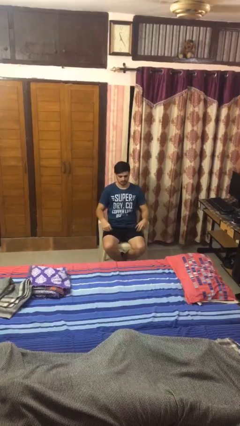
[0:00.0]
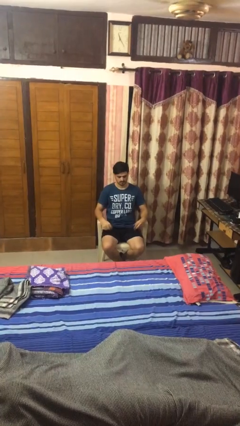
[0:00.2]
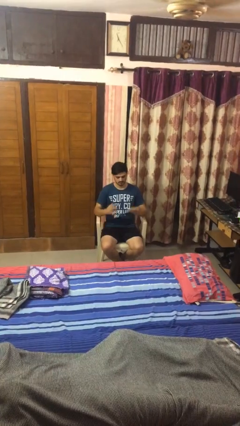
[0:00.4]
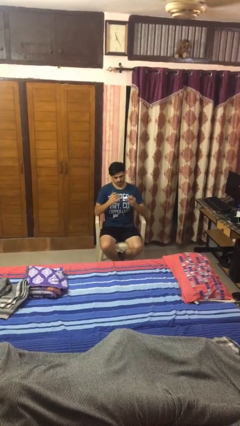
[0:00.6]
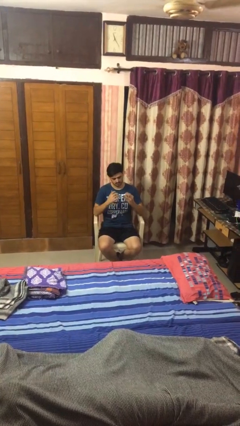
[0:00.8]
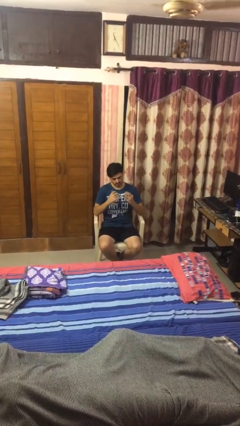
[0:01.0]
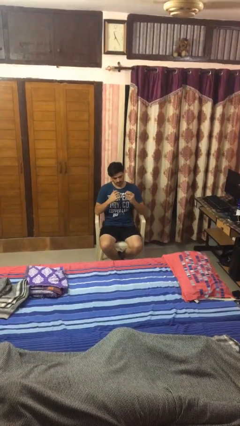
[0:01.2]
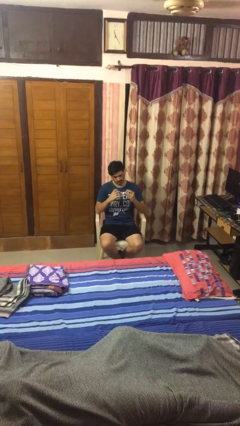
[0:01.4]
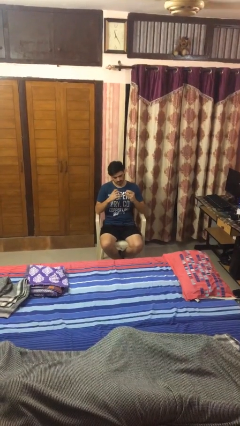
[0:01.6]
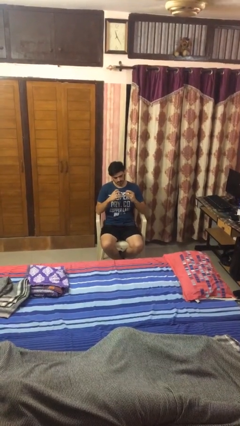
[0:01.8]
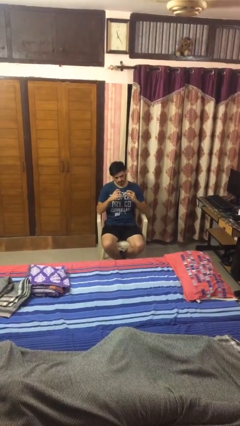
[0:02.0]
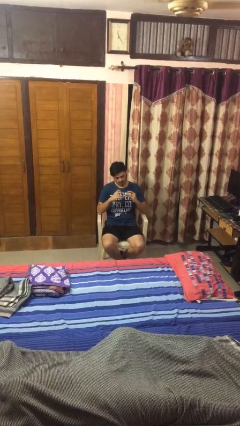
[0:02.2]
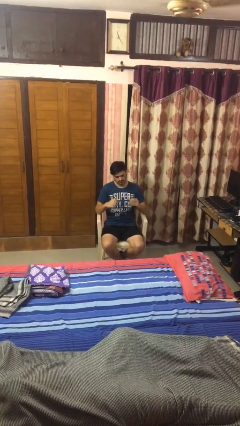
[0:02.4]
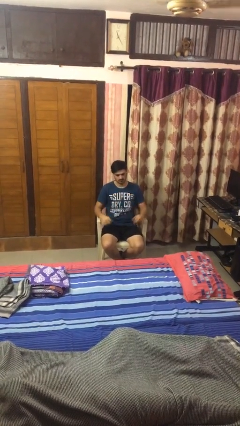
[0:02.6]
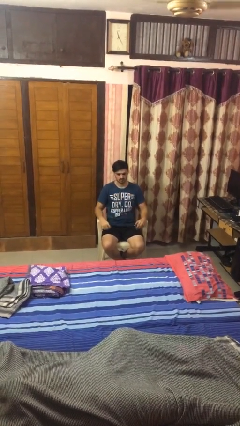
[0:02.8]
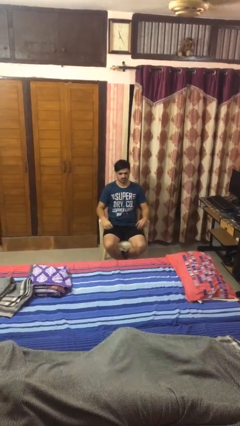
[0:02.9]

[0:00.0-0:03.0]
person clips fingernails

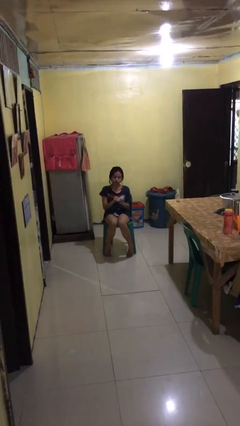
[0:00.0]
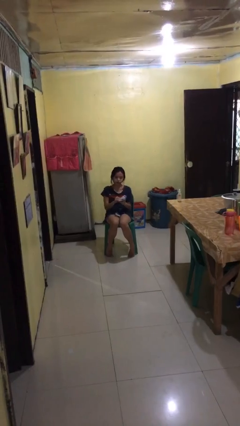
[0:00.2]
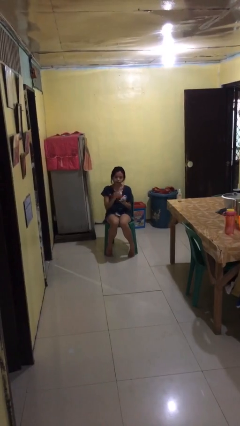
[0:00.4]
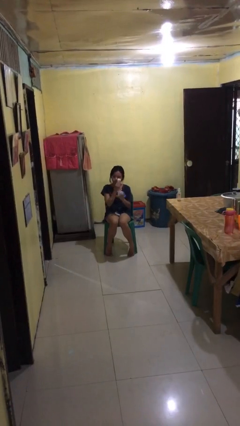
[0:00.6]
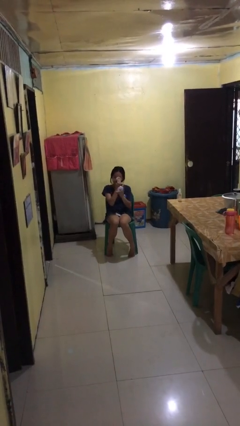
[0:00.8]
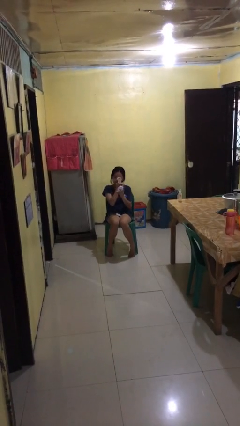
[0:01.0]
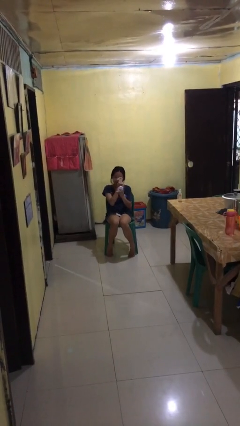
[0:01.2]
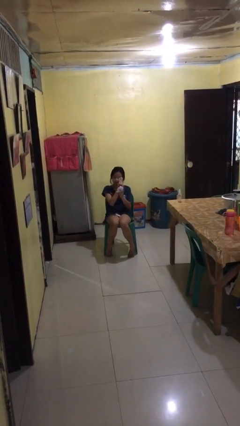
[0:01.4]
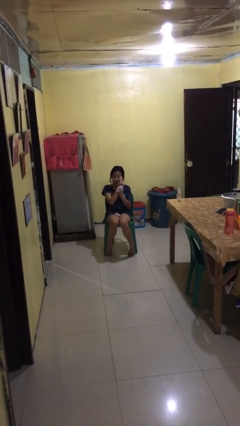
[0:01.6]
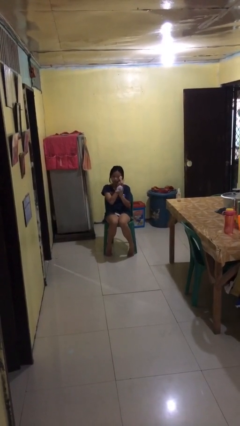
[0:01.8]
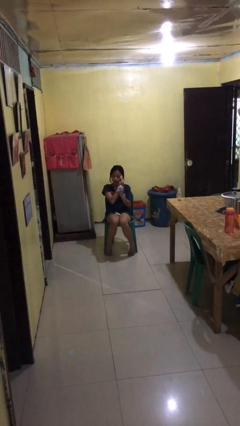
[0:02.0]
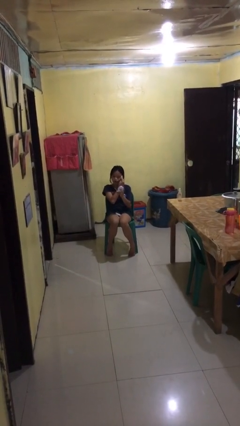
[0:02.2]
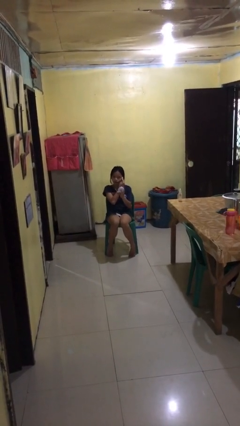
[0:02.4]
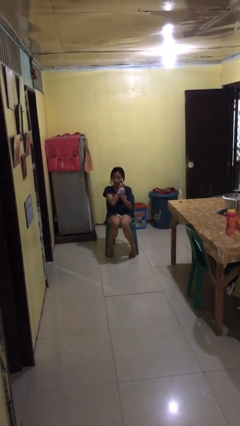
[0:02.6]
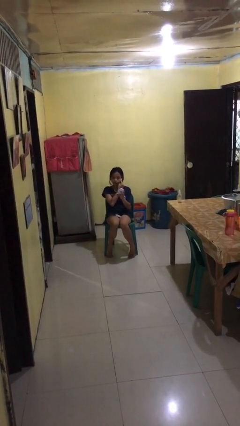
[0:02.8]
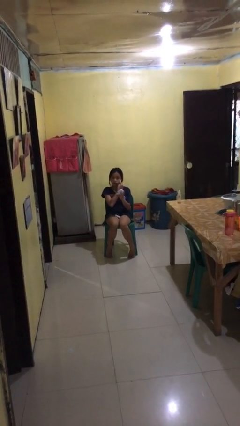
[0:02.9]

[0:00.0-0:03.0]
person applies foundation makeup

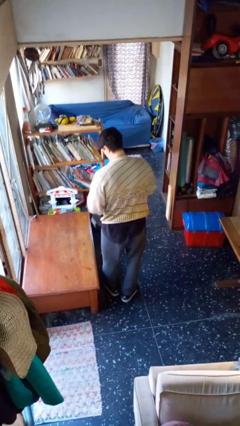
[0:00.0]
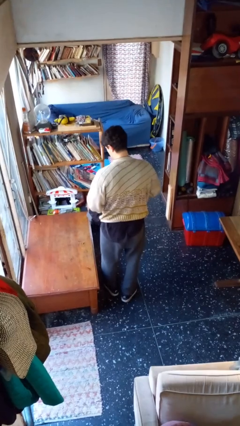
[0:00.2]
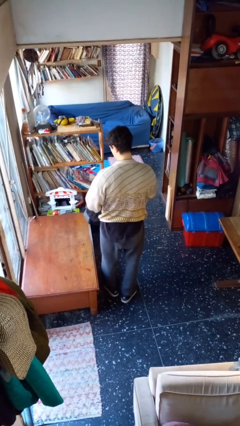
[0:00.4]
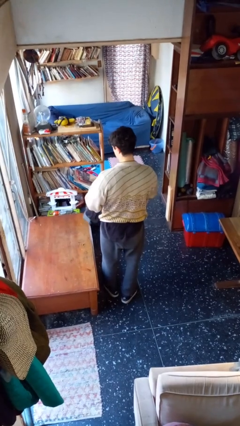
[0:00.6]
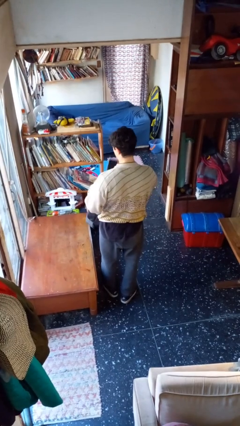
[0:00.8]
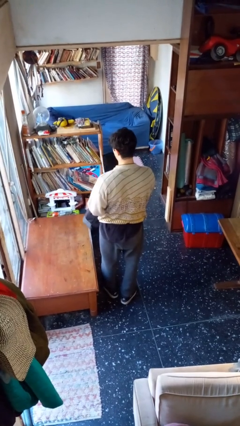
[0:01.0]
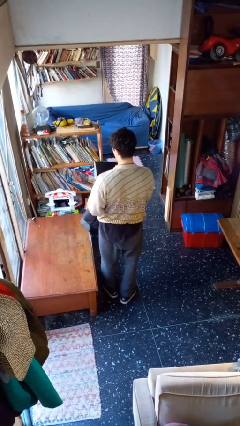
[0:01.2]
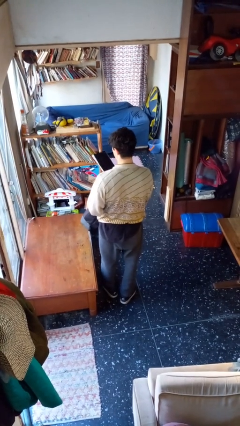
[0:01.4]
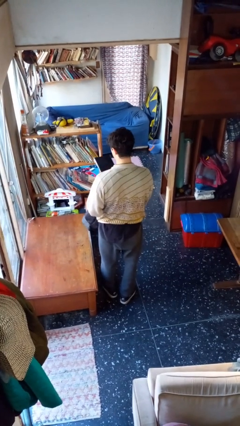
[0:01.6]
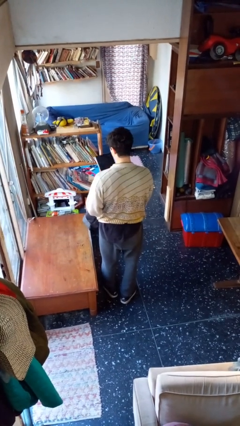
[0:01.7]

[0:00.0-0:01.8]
person takes object from backpack

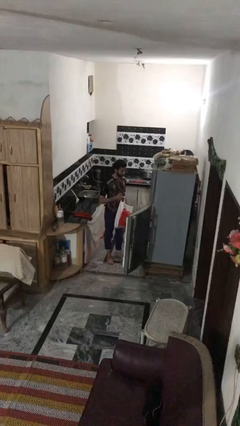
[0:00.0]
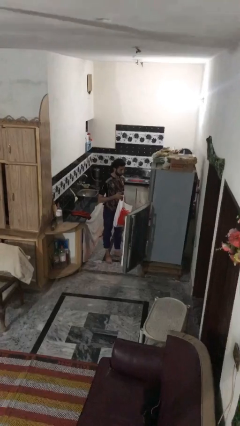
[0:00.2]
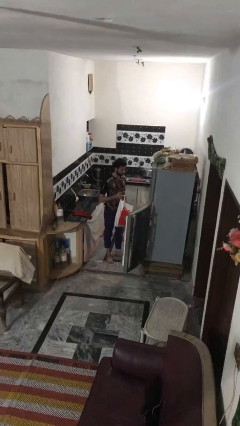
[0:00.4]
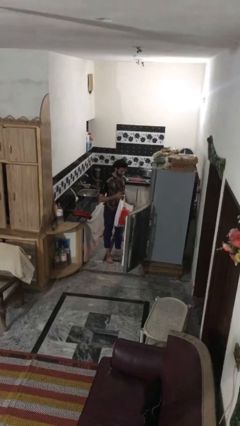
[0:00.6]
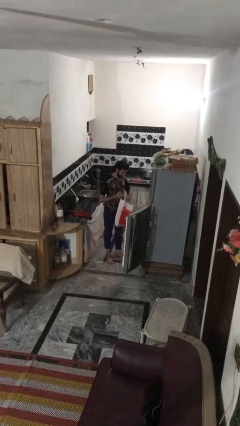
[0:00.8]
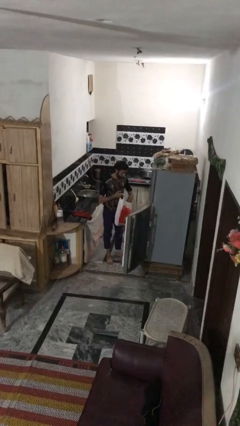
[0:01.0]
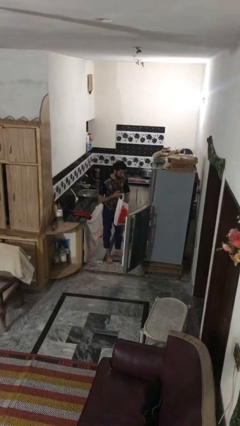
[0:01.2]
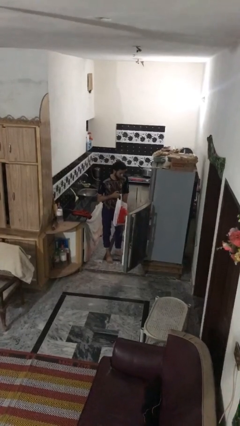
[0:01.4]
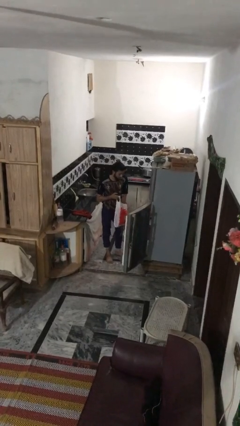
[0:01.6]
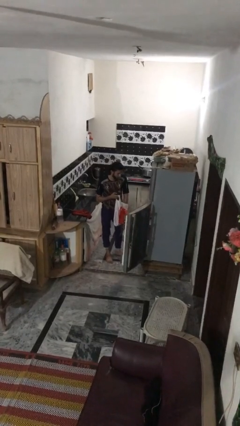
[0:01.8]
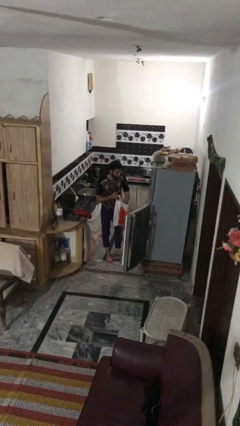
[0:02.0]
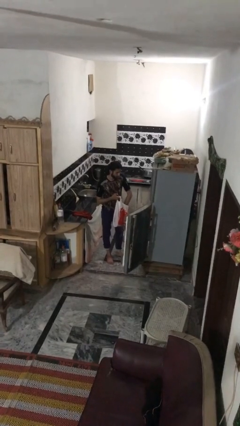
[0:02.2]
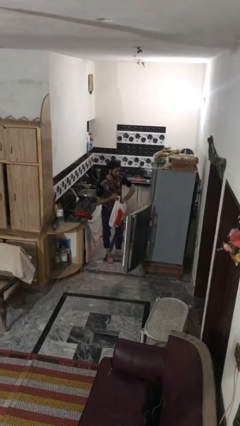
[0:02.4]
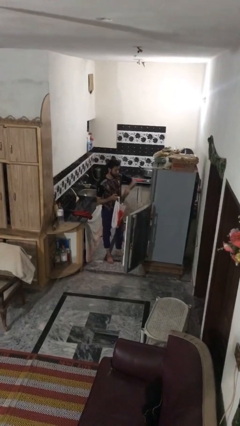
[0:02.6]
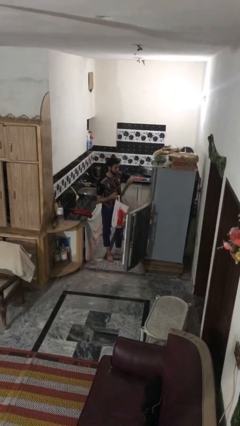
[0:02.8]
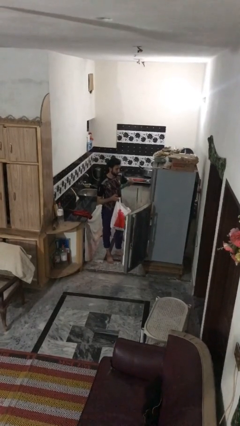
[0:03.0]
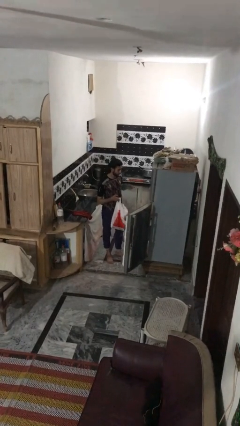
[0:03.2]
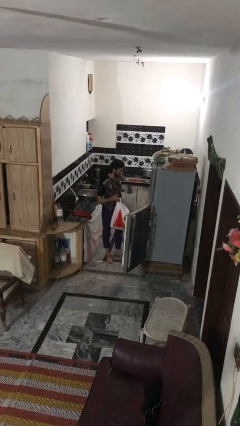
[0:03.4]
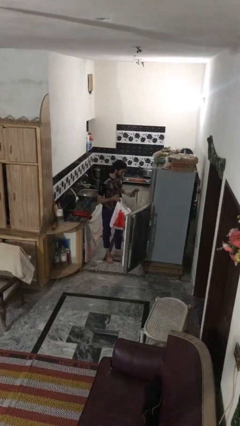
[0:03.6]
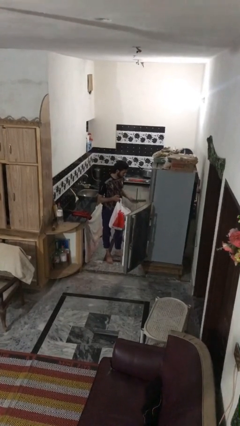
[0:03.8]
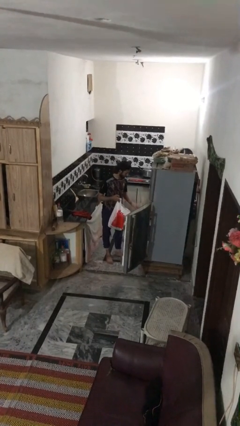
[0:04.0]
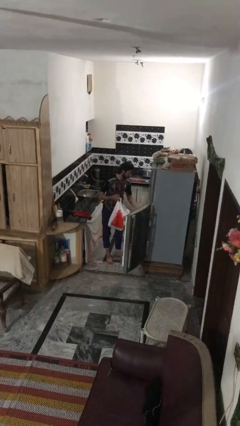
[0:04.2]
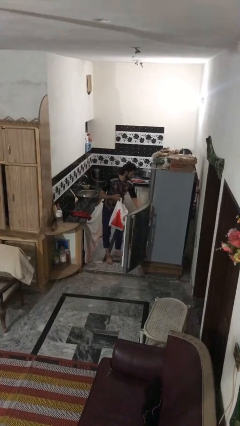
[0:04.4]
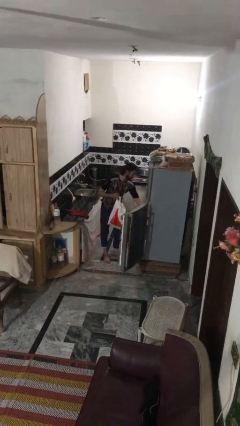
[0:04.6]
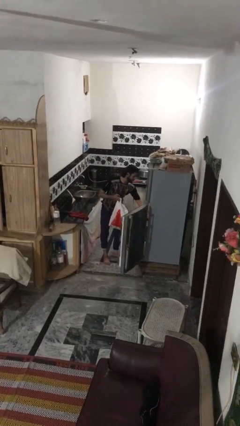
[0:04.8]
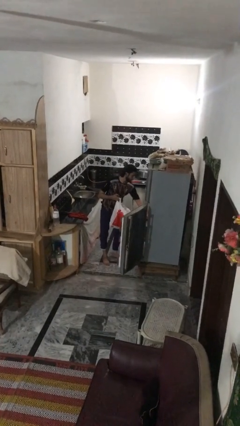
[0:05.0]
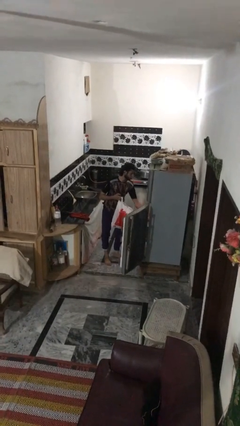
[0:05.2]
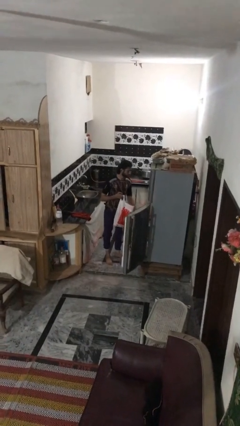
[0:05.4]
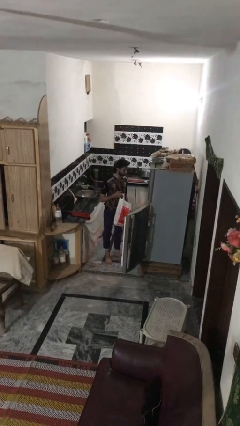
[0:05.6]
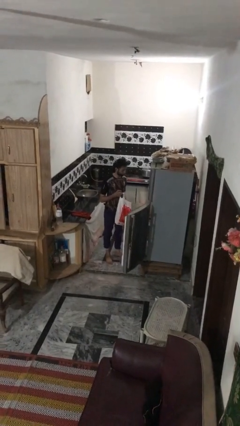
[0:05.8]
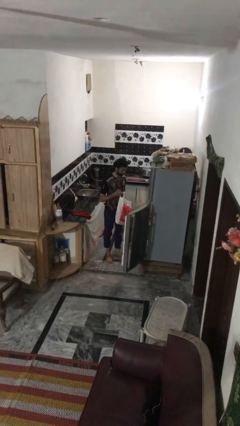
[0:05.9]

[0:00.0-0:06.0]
person loads groceries into refrigerator

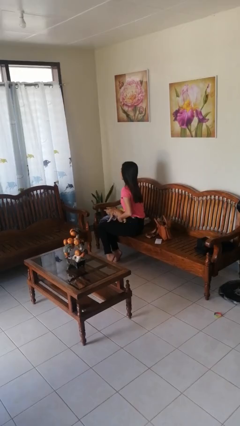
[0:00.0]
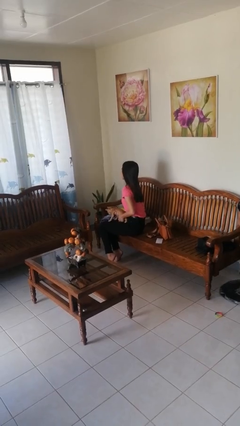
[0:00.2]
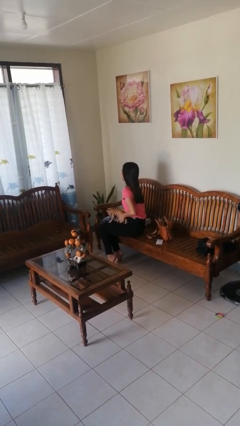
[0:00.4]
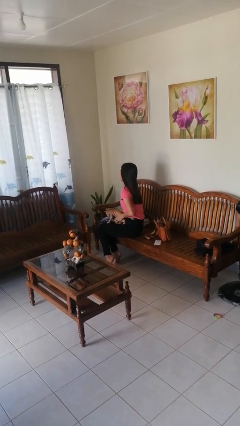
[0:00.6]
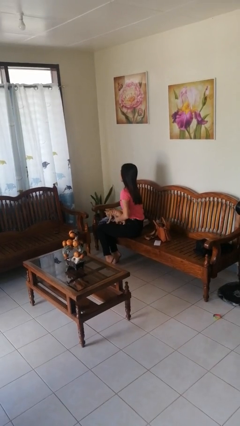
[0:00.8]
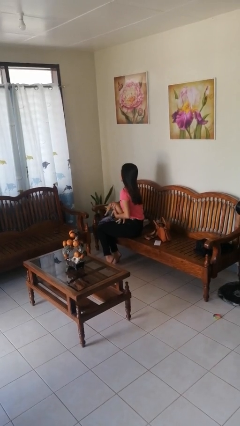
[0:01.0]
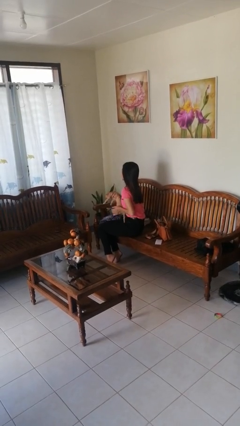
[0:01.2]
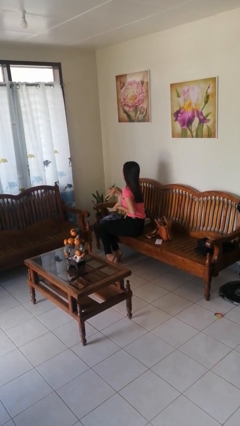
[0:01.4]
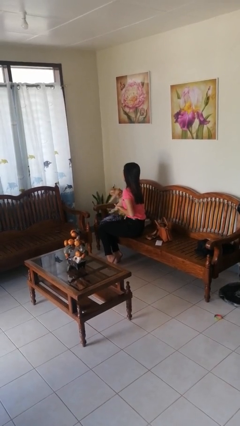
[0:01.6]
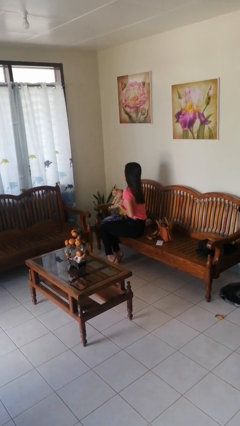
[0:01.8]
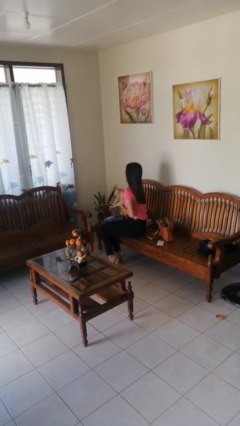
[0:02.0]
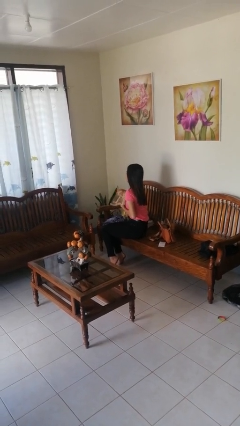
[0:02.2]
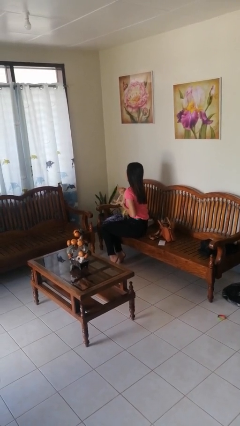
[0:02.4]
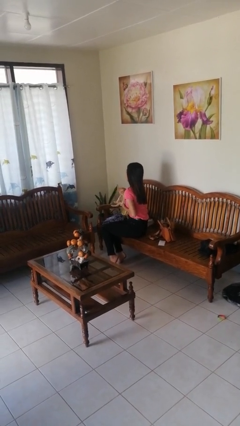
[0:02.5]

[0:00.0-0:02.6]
person hugs cat

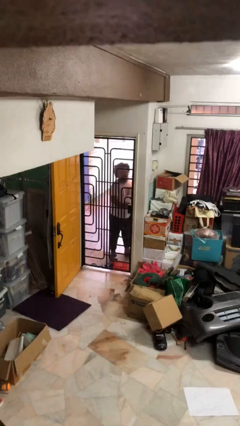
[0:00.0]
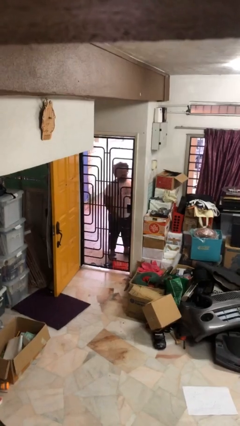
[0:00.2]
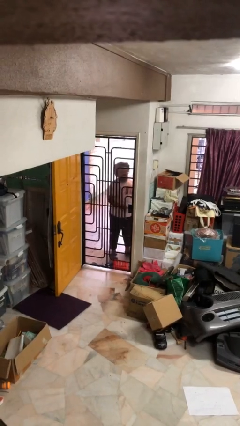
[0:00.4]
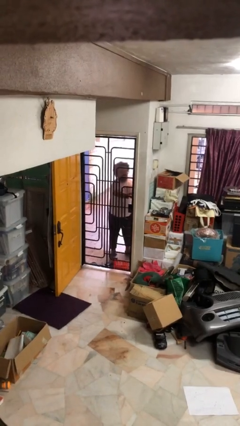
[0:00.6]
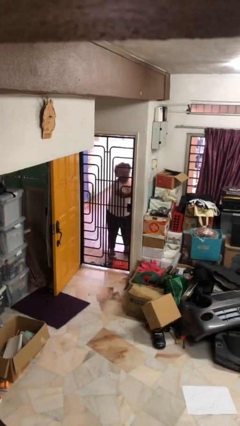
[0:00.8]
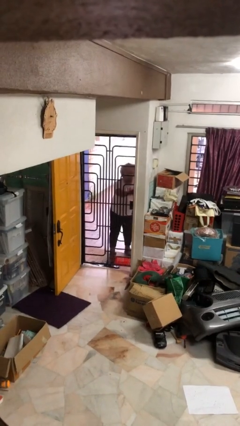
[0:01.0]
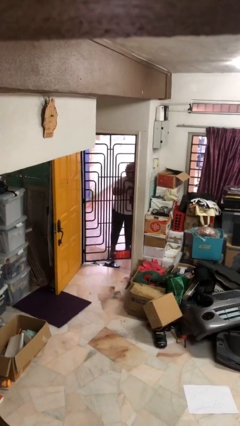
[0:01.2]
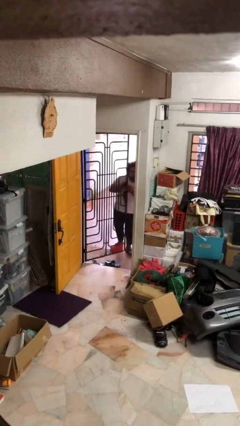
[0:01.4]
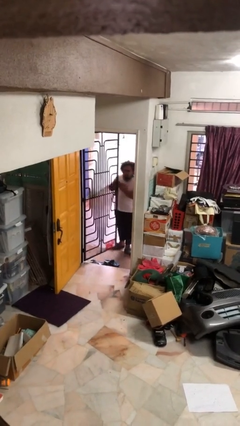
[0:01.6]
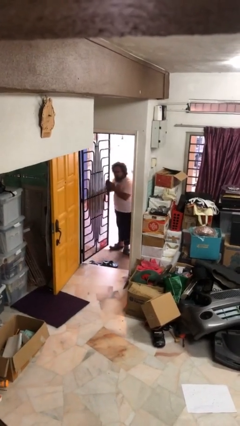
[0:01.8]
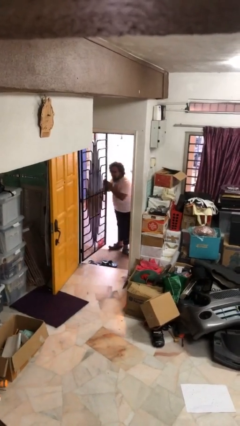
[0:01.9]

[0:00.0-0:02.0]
person opens facility door
